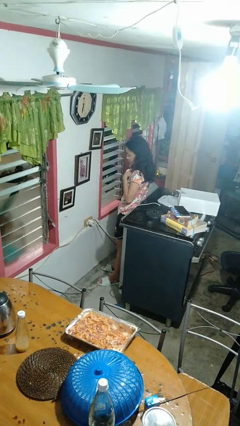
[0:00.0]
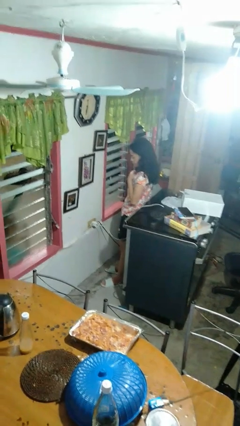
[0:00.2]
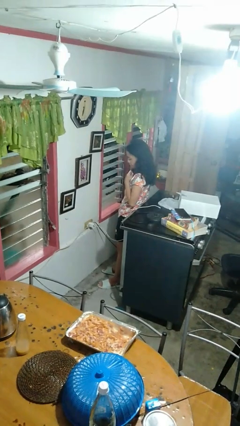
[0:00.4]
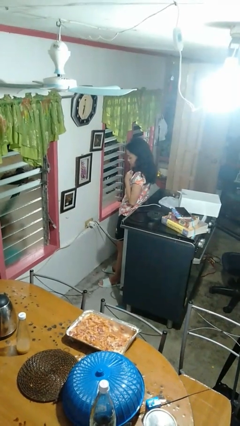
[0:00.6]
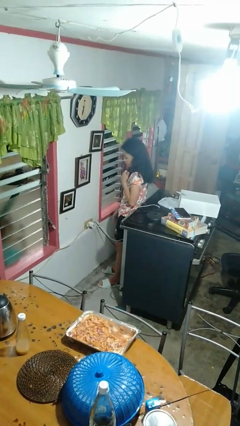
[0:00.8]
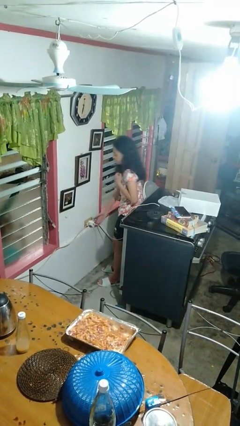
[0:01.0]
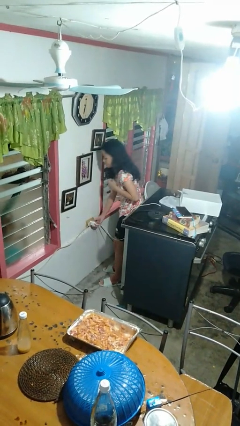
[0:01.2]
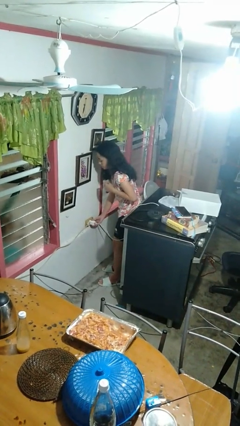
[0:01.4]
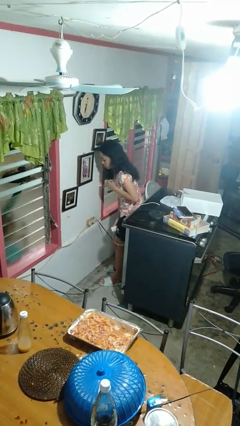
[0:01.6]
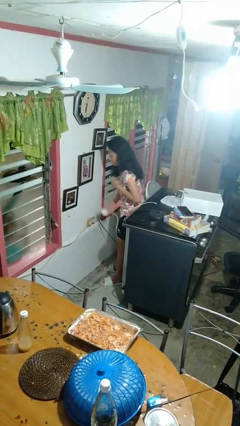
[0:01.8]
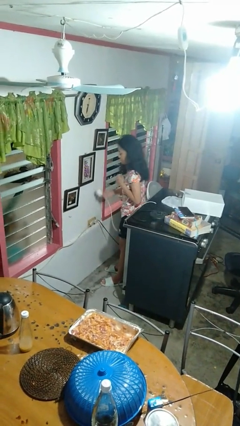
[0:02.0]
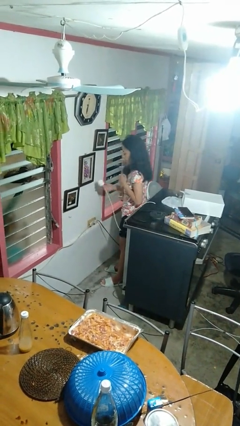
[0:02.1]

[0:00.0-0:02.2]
person unplugs from electrical socket

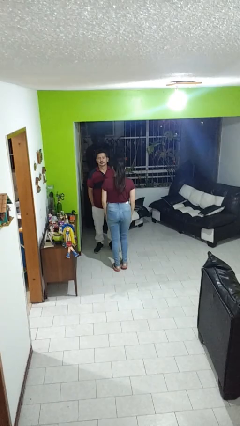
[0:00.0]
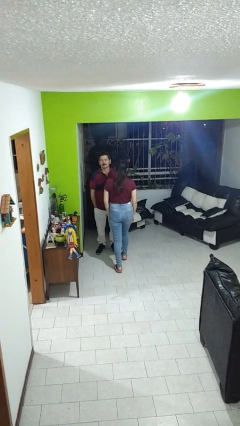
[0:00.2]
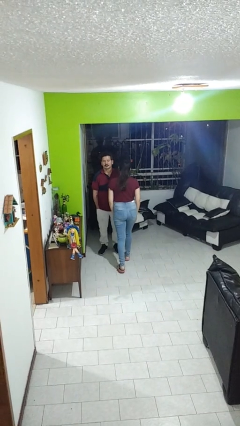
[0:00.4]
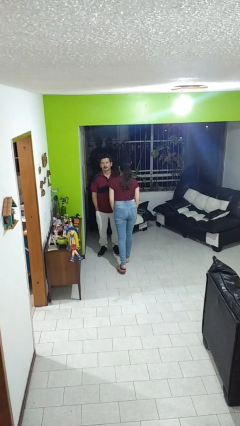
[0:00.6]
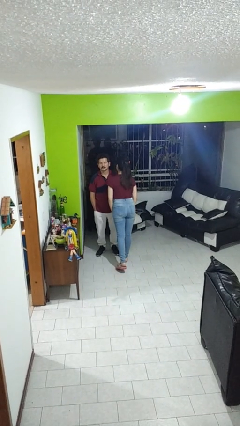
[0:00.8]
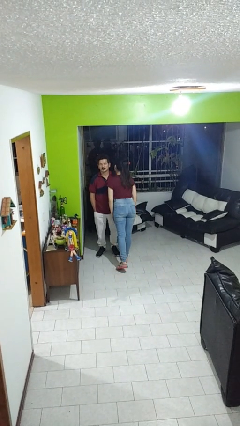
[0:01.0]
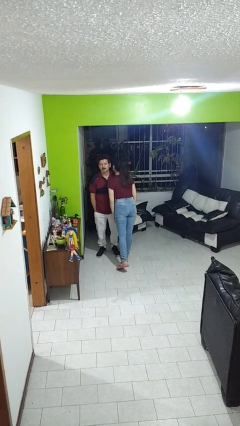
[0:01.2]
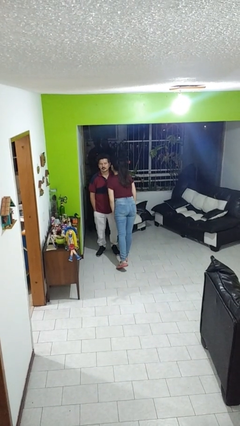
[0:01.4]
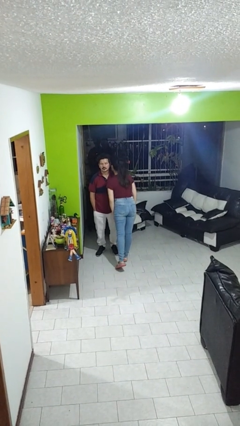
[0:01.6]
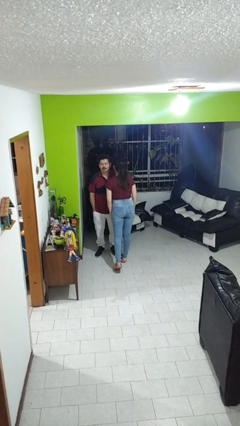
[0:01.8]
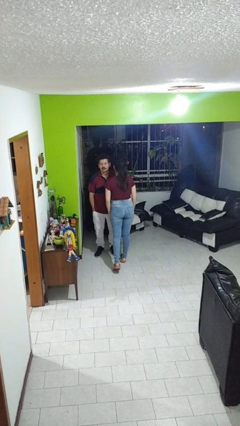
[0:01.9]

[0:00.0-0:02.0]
person kisses cheek of person

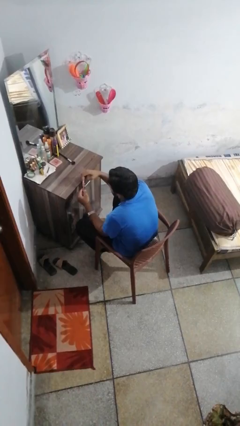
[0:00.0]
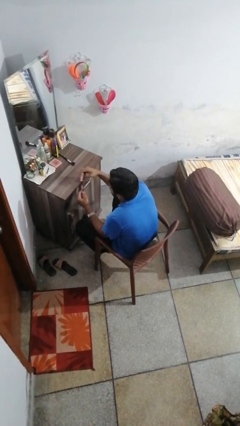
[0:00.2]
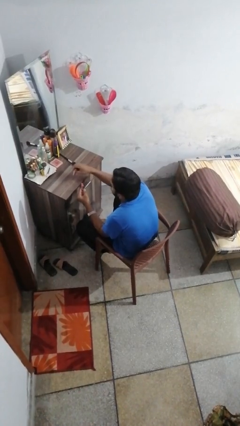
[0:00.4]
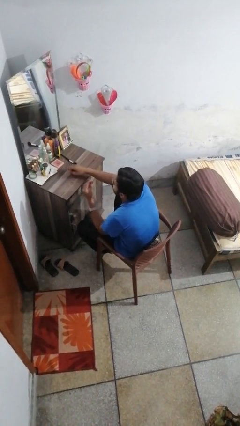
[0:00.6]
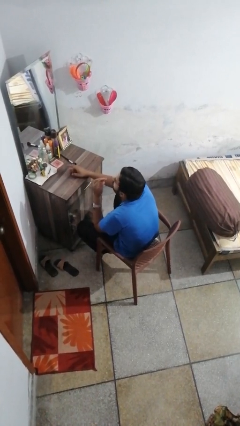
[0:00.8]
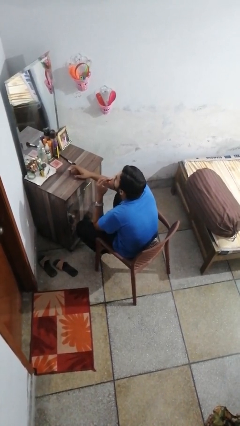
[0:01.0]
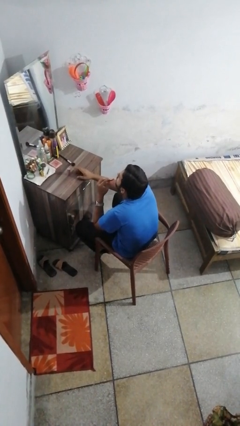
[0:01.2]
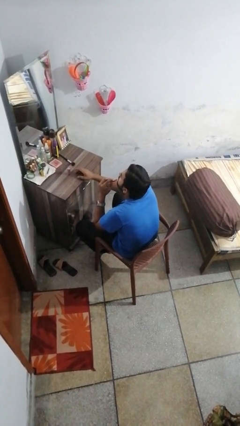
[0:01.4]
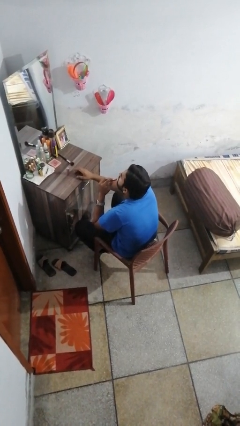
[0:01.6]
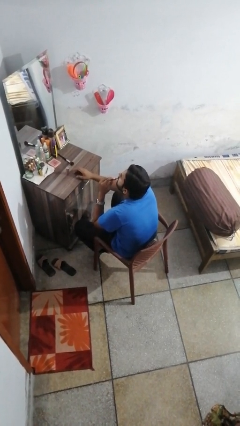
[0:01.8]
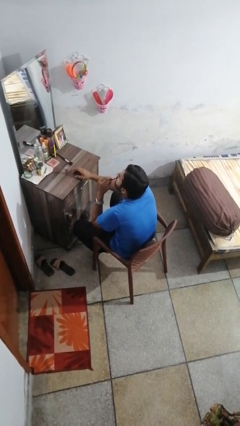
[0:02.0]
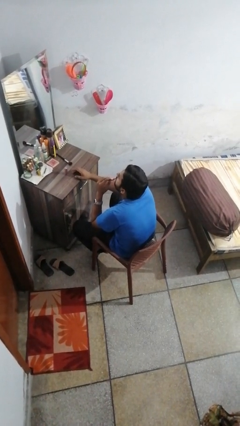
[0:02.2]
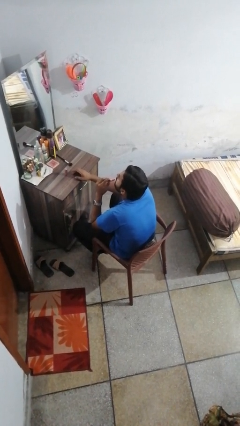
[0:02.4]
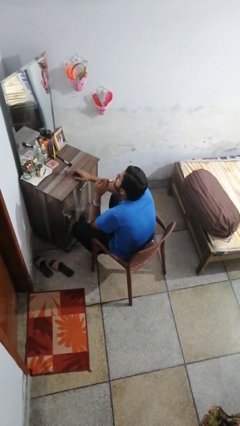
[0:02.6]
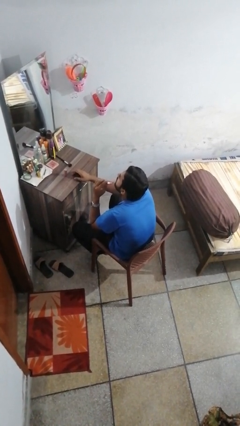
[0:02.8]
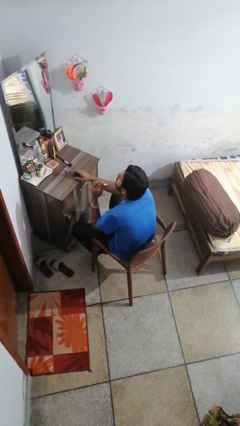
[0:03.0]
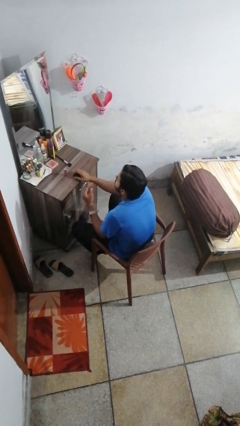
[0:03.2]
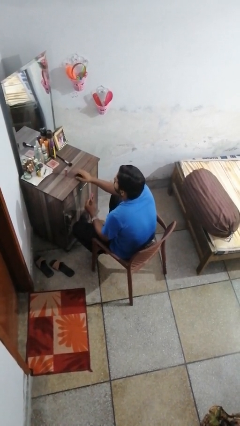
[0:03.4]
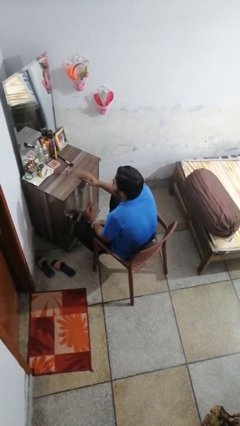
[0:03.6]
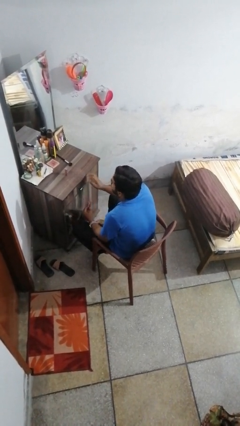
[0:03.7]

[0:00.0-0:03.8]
person applies lip makeup

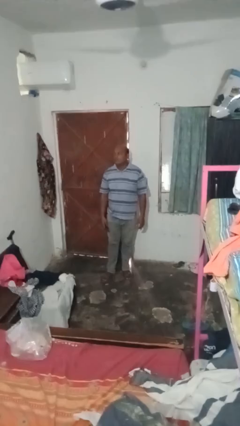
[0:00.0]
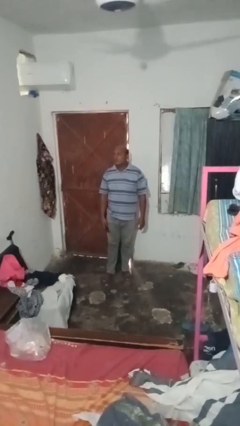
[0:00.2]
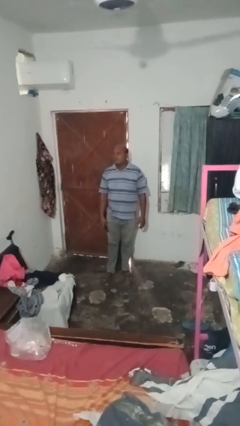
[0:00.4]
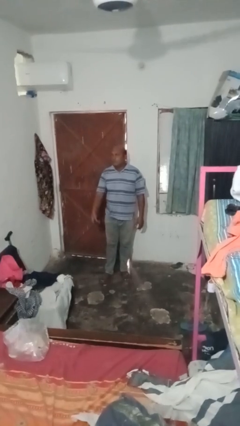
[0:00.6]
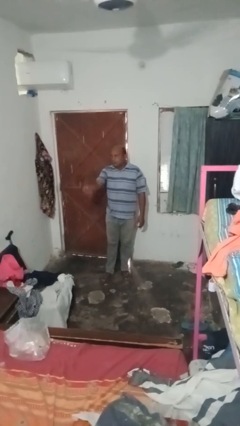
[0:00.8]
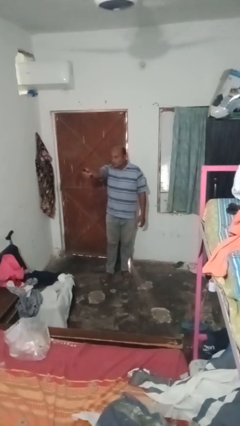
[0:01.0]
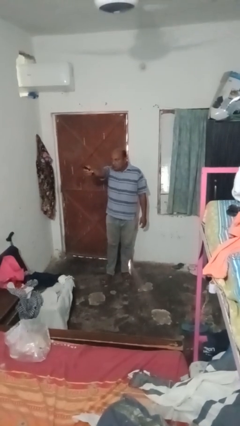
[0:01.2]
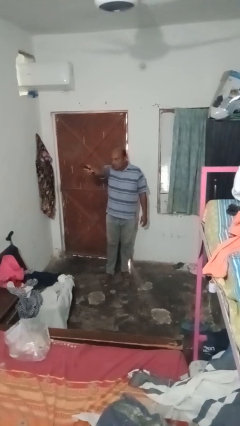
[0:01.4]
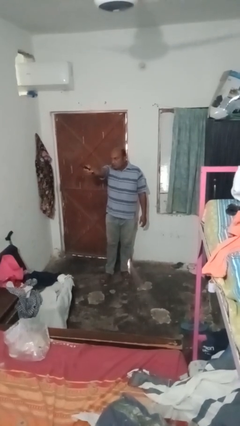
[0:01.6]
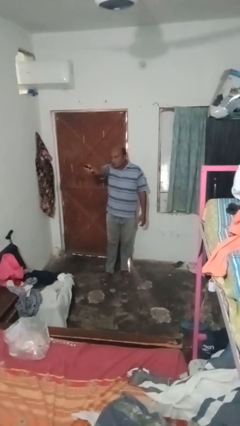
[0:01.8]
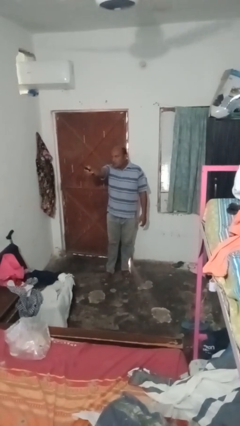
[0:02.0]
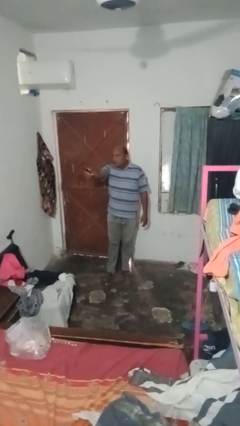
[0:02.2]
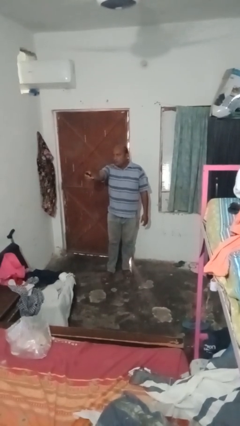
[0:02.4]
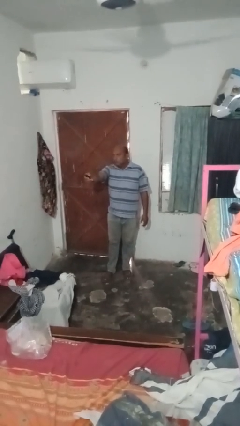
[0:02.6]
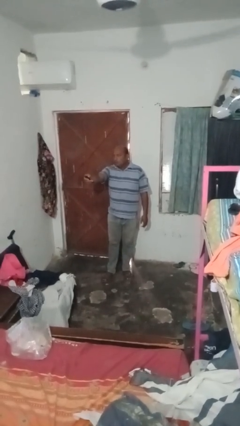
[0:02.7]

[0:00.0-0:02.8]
person uses television remote

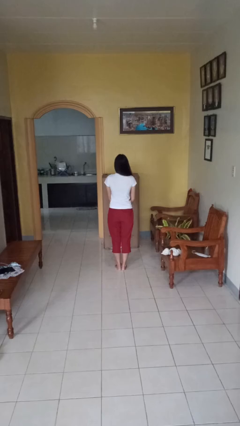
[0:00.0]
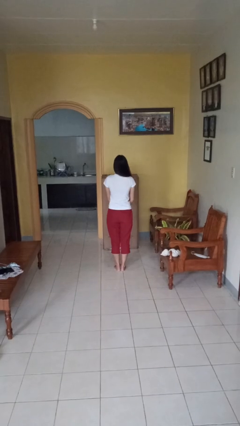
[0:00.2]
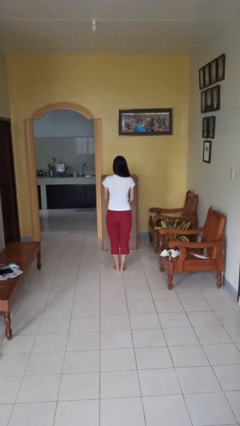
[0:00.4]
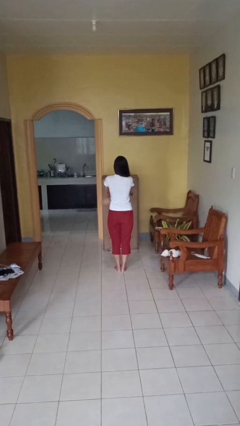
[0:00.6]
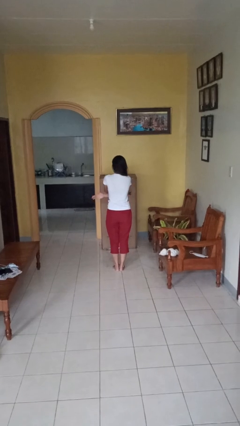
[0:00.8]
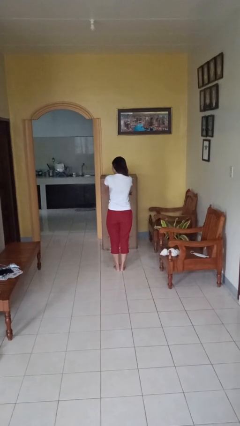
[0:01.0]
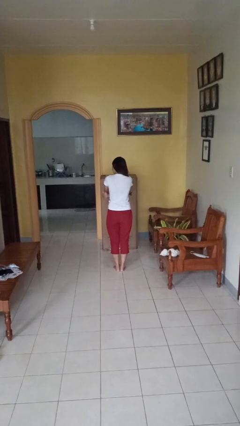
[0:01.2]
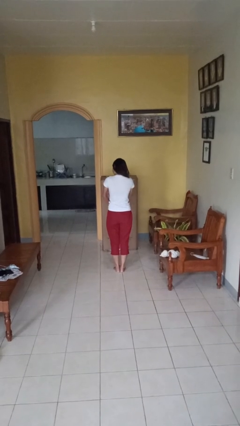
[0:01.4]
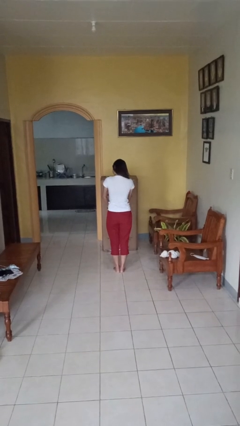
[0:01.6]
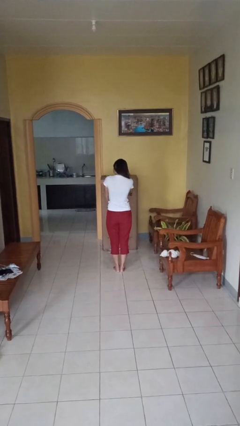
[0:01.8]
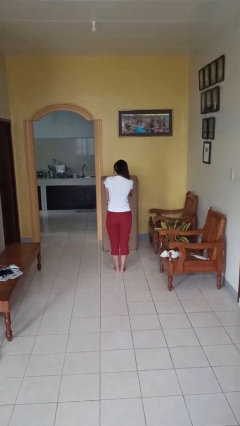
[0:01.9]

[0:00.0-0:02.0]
person swats bug

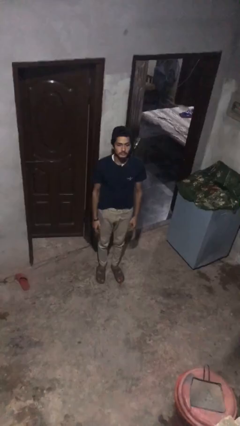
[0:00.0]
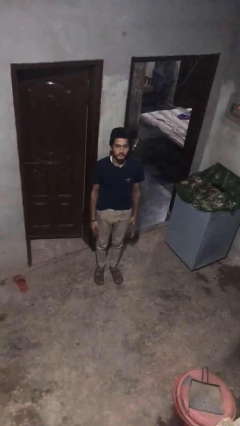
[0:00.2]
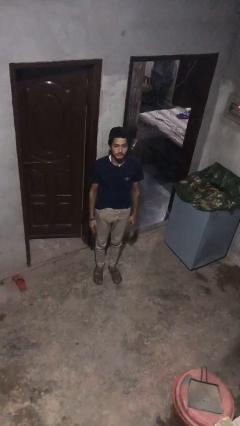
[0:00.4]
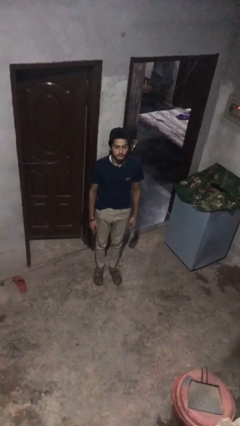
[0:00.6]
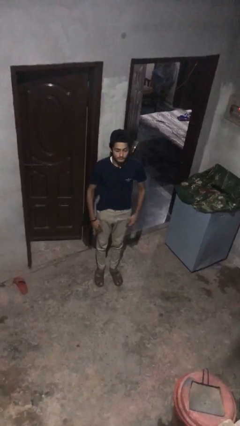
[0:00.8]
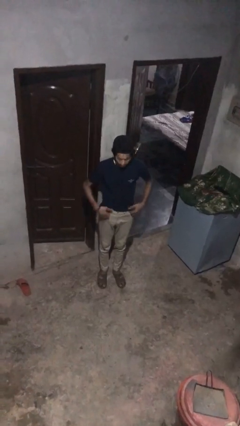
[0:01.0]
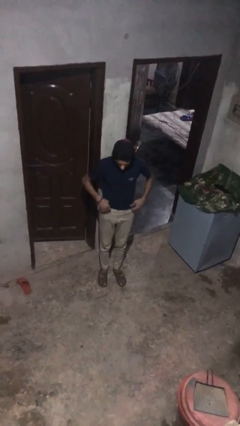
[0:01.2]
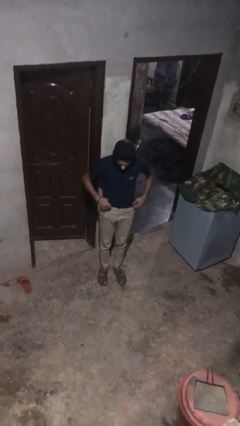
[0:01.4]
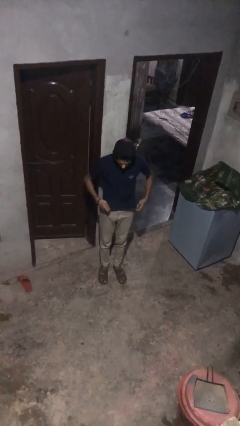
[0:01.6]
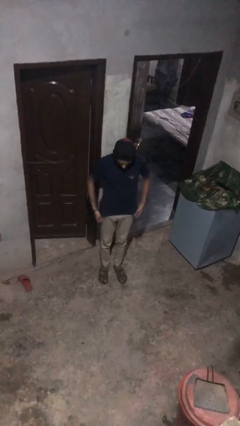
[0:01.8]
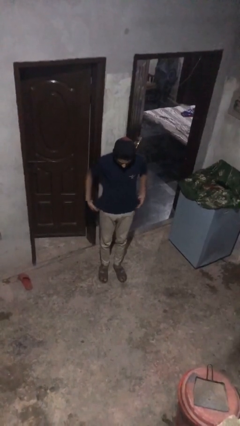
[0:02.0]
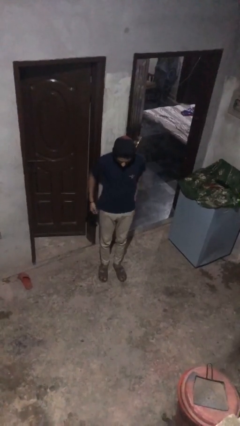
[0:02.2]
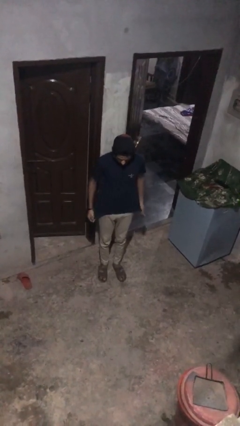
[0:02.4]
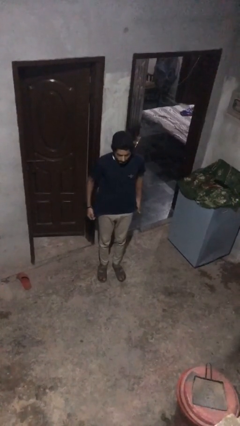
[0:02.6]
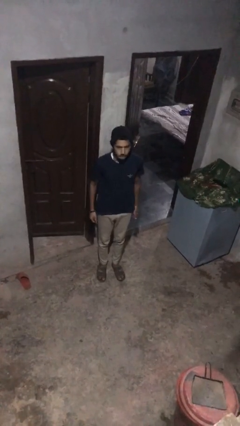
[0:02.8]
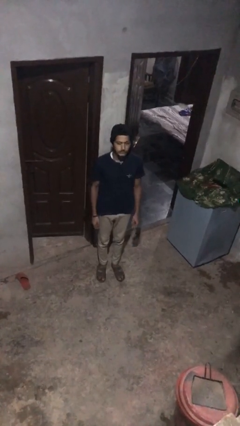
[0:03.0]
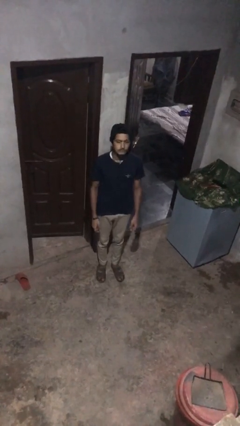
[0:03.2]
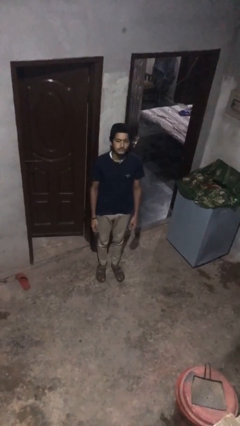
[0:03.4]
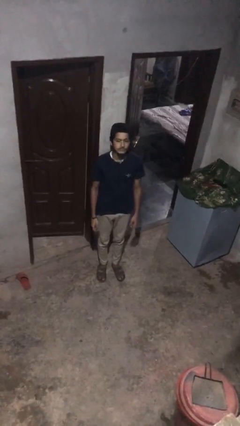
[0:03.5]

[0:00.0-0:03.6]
person untucks shirt

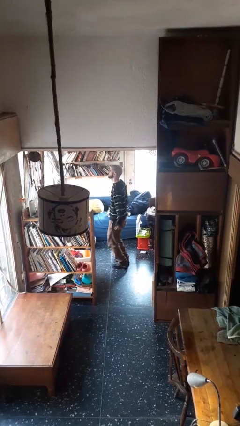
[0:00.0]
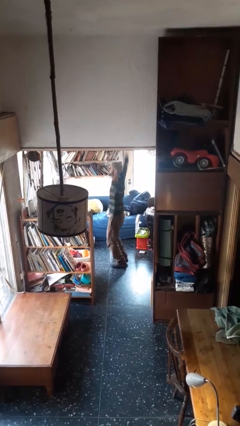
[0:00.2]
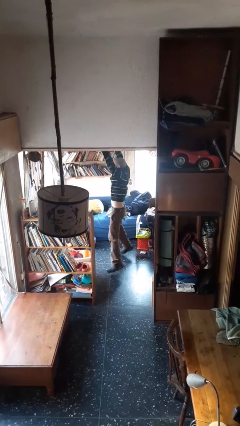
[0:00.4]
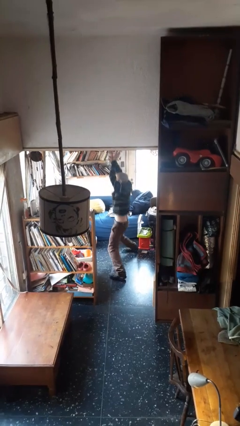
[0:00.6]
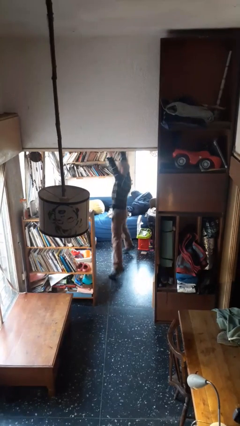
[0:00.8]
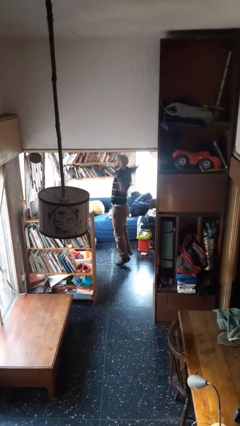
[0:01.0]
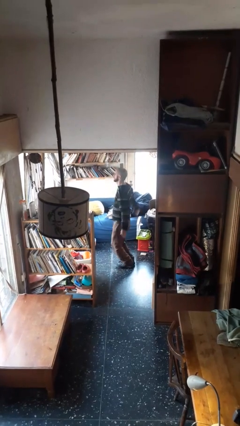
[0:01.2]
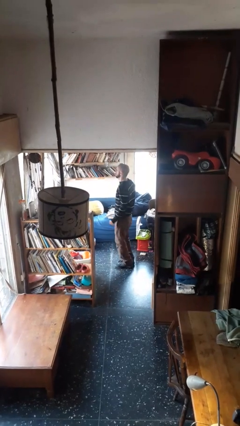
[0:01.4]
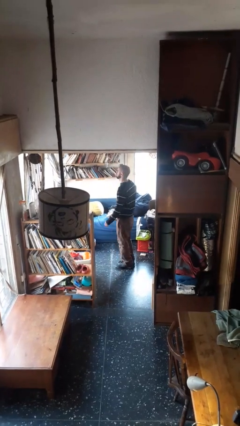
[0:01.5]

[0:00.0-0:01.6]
person exercises with jumping jacks
